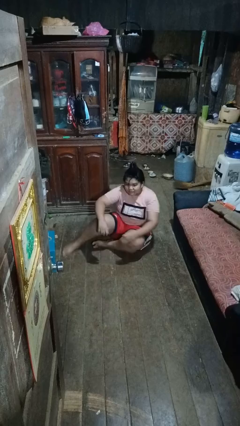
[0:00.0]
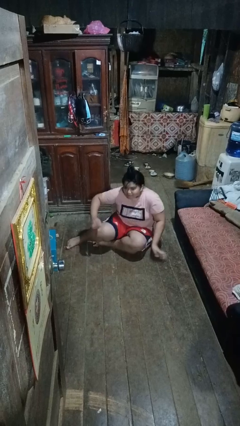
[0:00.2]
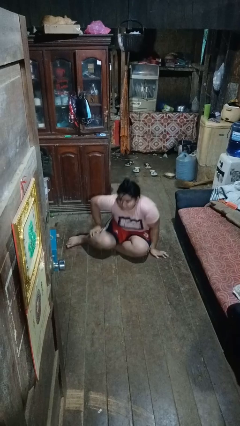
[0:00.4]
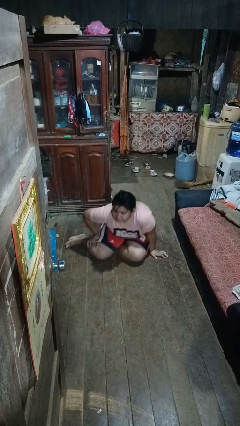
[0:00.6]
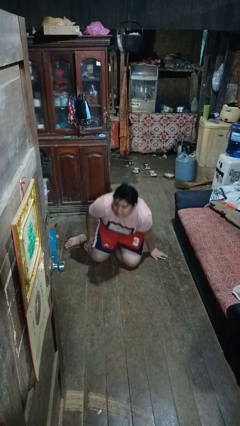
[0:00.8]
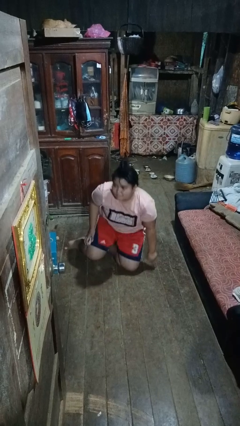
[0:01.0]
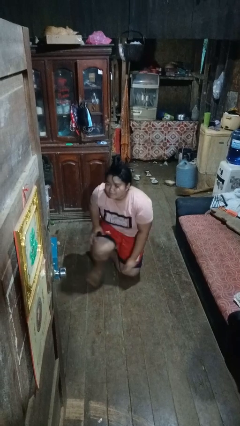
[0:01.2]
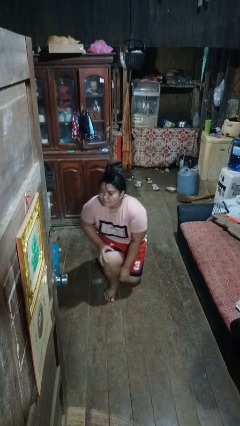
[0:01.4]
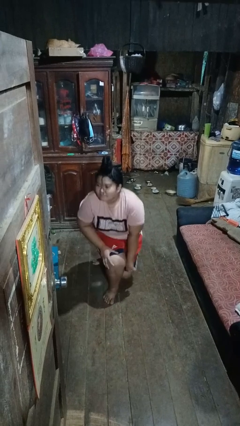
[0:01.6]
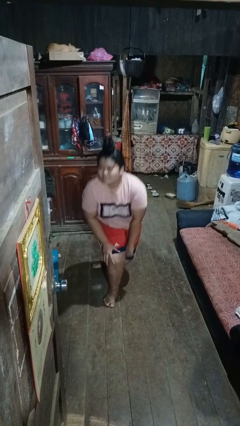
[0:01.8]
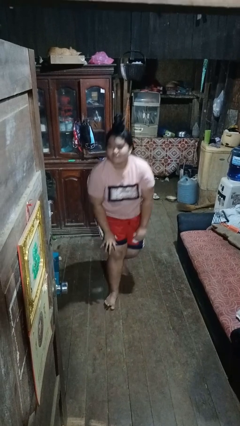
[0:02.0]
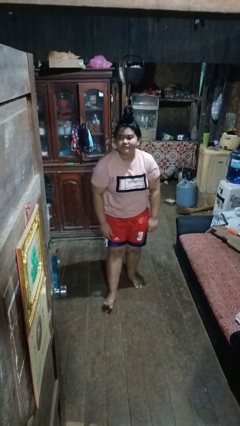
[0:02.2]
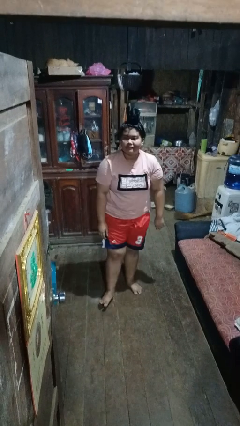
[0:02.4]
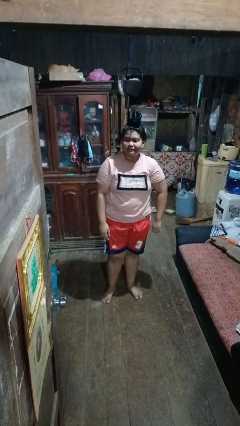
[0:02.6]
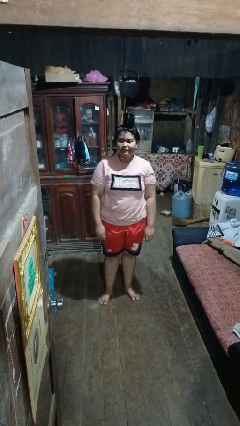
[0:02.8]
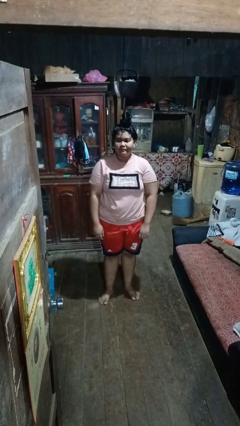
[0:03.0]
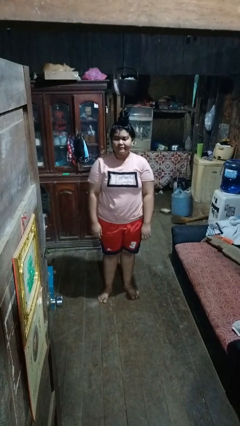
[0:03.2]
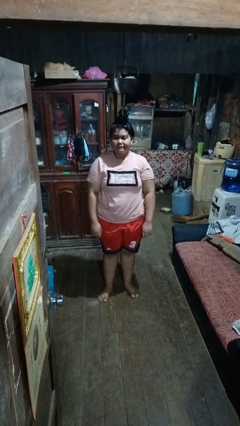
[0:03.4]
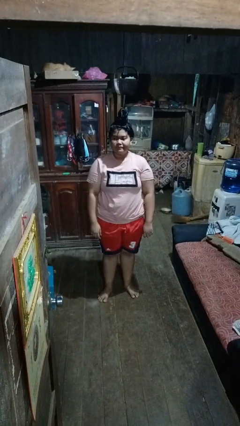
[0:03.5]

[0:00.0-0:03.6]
person stands up from floor

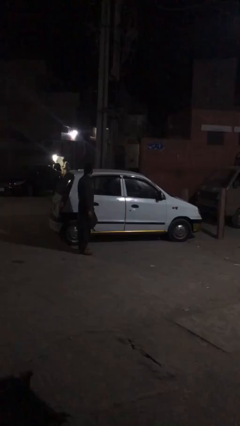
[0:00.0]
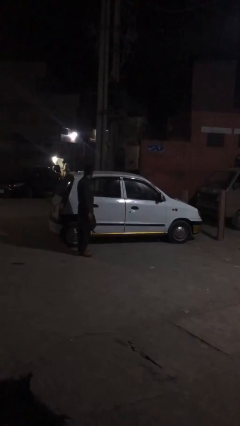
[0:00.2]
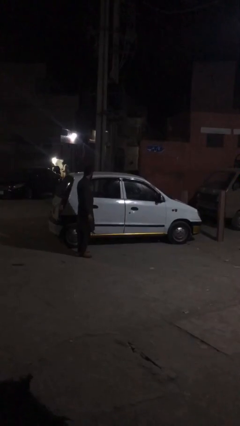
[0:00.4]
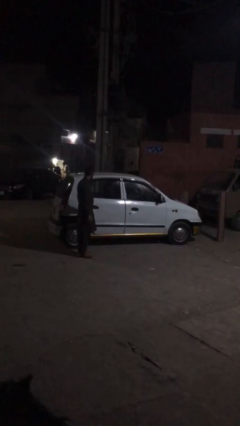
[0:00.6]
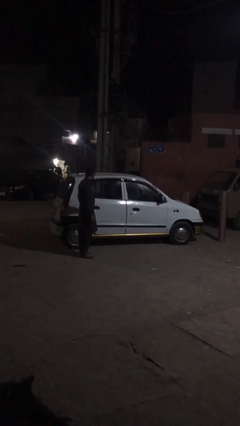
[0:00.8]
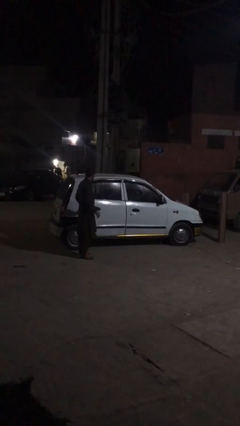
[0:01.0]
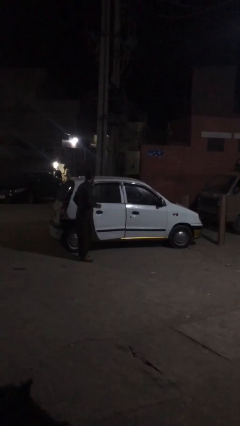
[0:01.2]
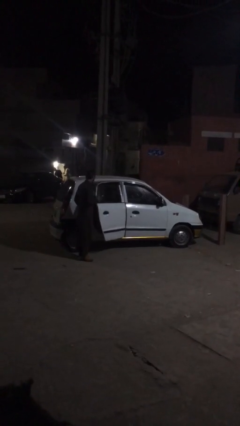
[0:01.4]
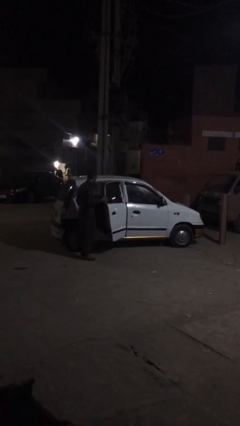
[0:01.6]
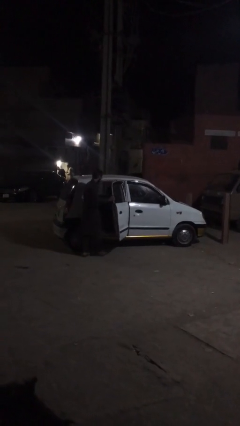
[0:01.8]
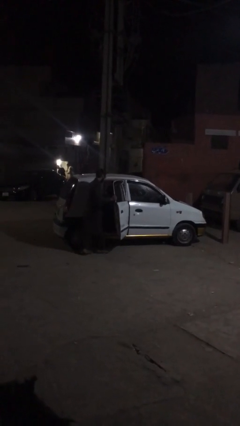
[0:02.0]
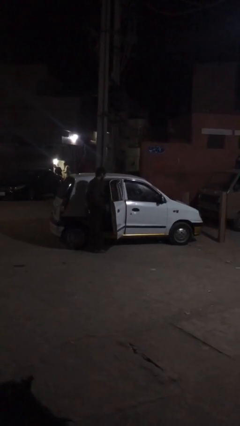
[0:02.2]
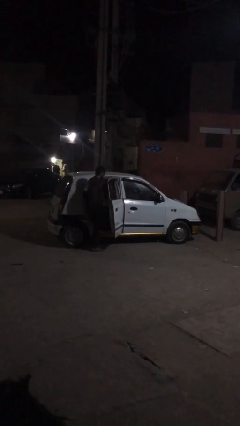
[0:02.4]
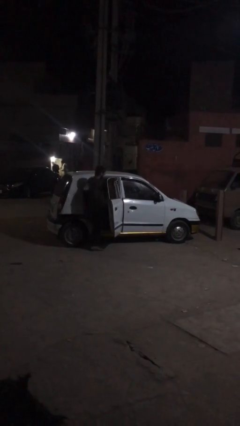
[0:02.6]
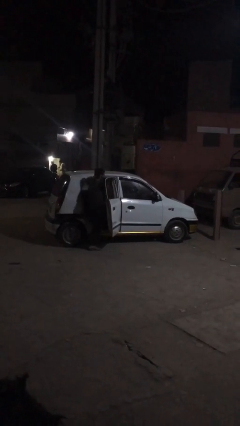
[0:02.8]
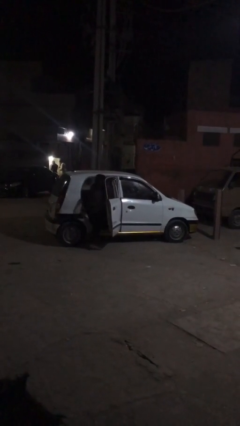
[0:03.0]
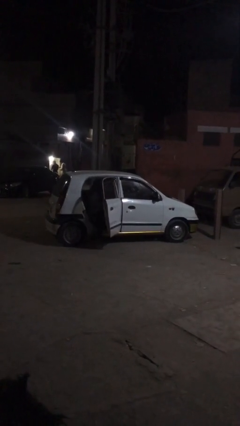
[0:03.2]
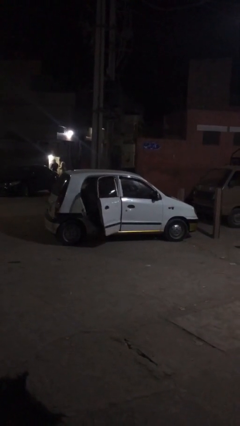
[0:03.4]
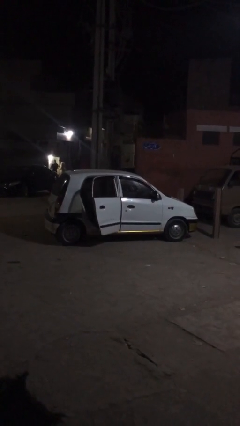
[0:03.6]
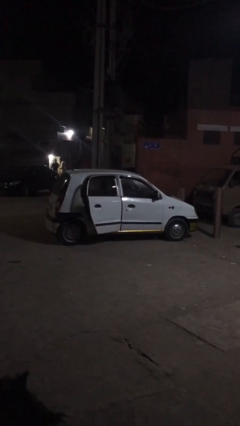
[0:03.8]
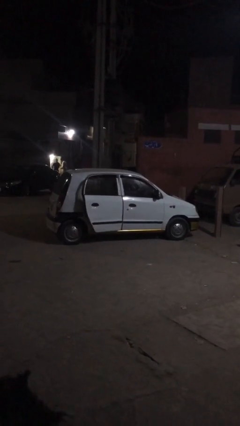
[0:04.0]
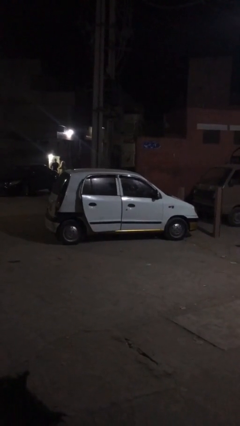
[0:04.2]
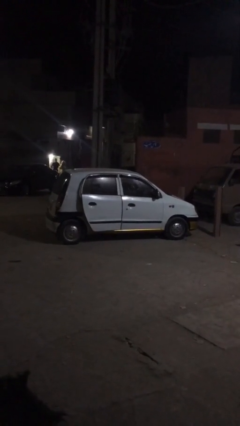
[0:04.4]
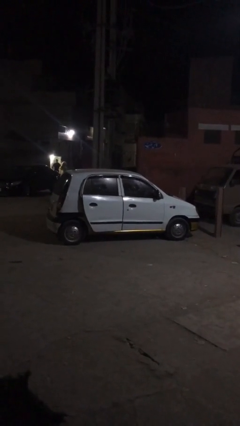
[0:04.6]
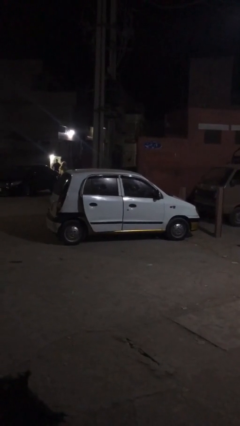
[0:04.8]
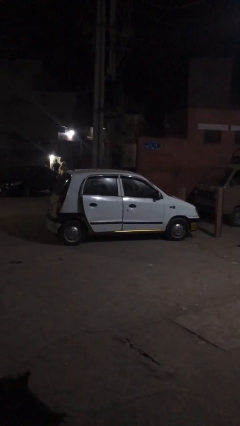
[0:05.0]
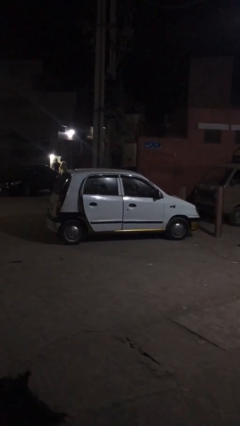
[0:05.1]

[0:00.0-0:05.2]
car picks up person

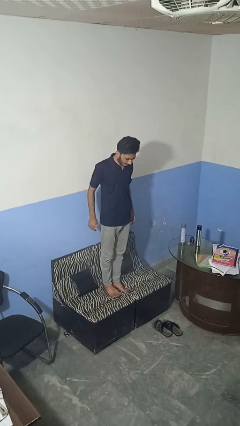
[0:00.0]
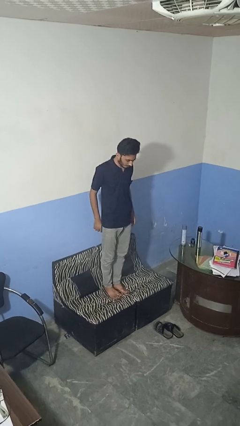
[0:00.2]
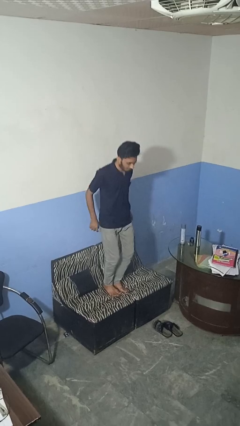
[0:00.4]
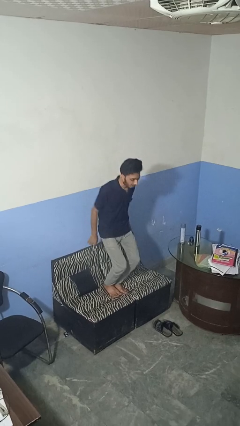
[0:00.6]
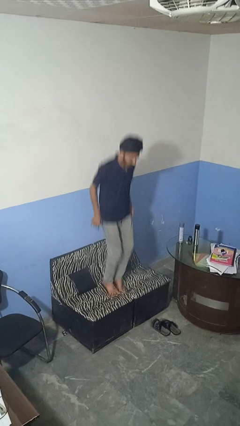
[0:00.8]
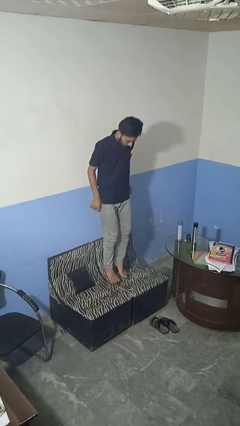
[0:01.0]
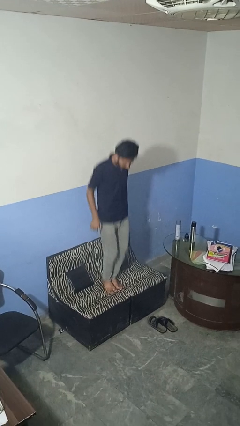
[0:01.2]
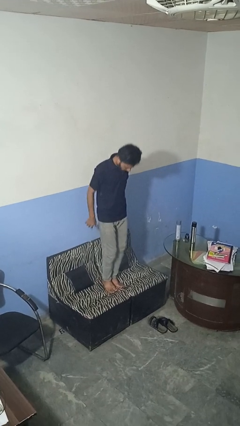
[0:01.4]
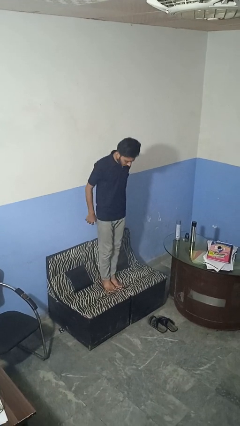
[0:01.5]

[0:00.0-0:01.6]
person jumps on couch

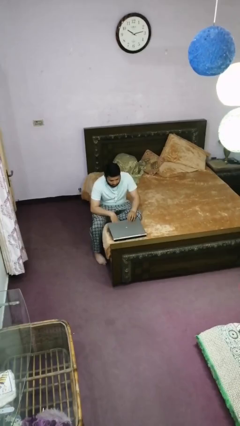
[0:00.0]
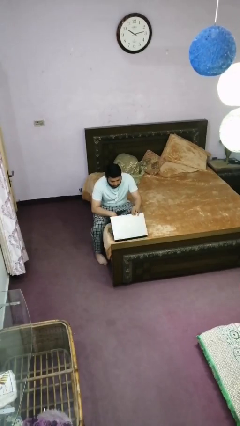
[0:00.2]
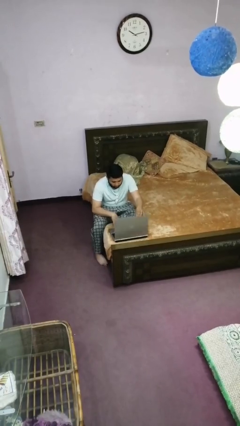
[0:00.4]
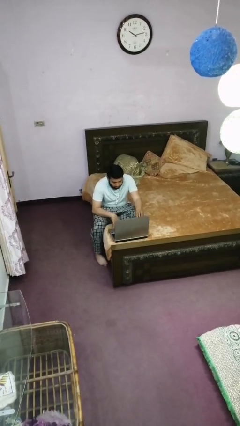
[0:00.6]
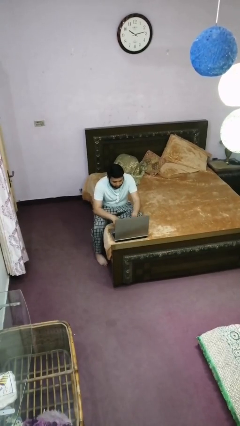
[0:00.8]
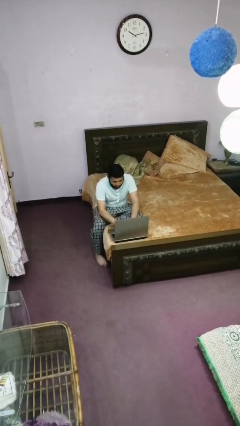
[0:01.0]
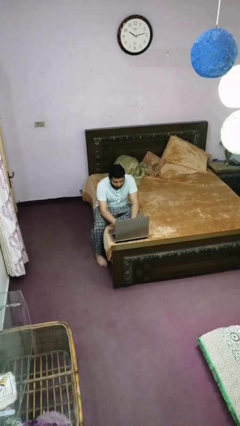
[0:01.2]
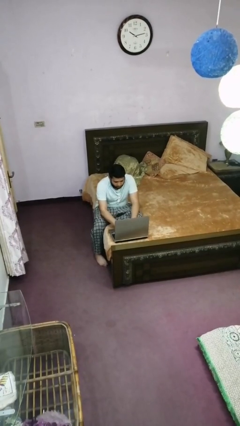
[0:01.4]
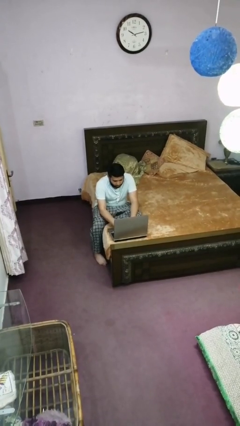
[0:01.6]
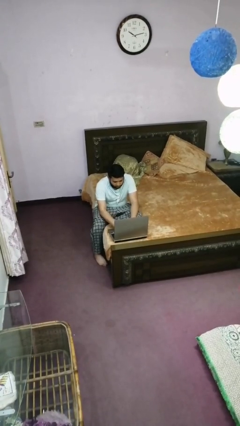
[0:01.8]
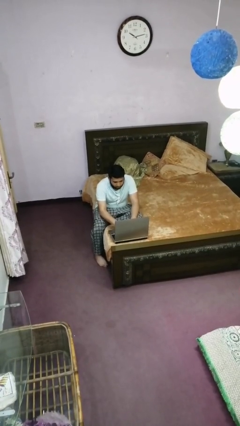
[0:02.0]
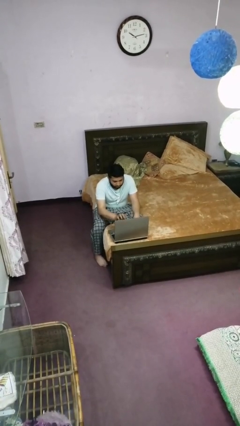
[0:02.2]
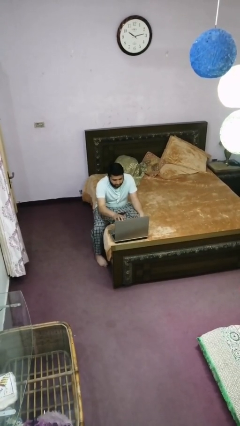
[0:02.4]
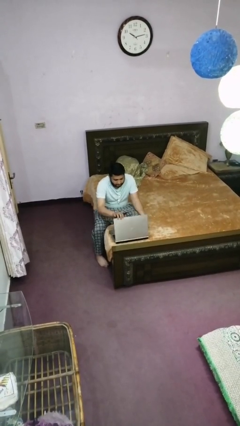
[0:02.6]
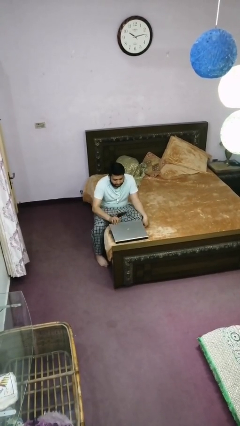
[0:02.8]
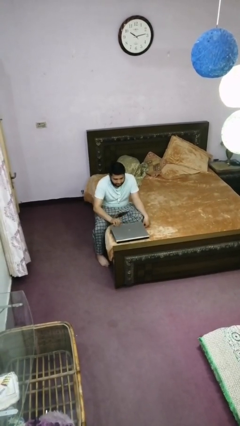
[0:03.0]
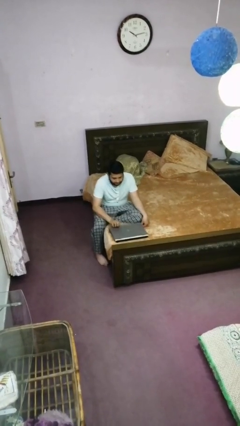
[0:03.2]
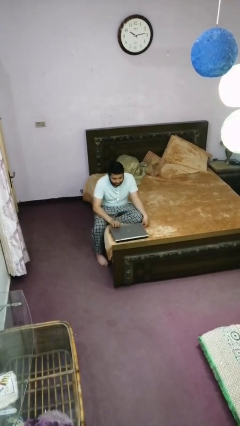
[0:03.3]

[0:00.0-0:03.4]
person interacts with laptop

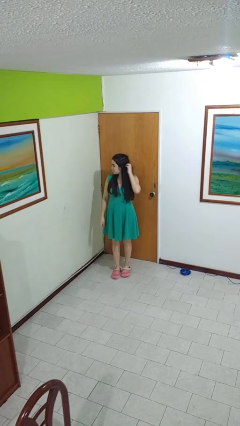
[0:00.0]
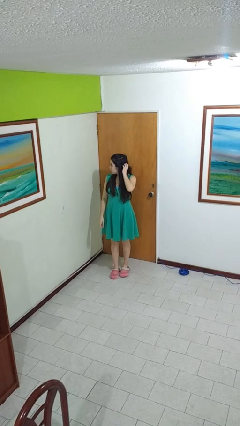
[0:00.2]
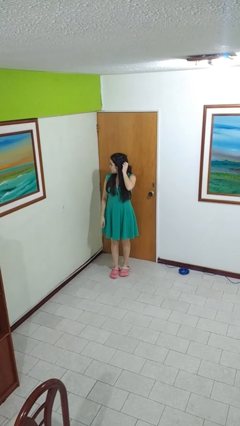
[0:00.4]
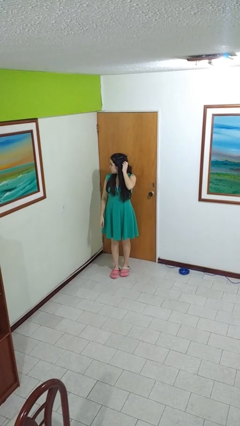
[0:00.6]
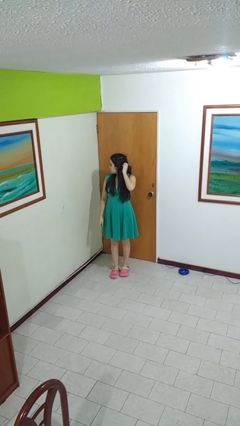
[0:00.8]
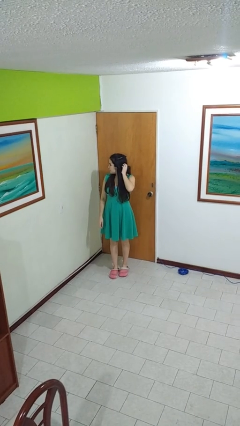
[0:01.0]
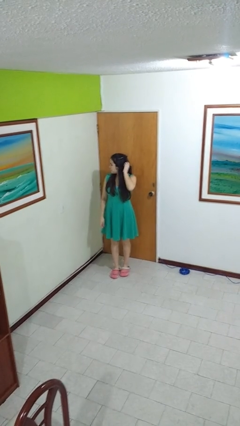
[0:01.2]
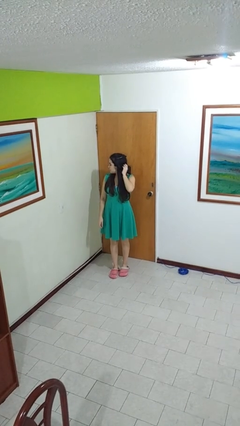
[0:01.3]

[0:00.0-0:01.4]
person scratches face

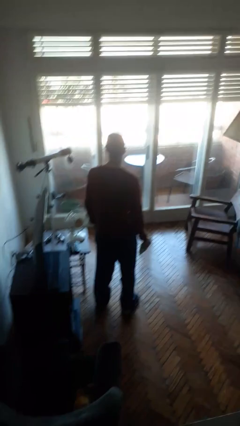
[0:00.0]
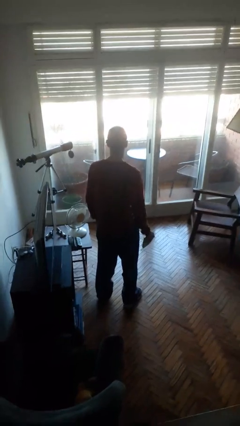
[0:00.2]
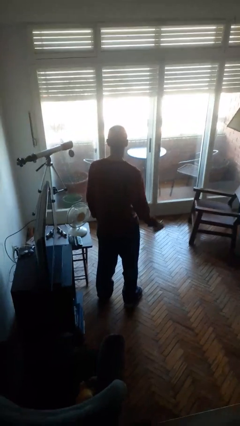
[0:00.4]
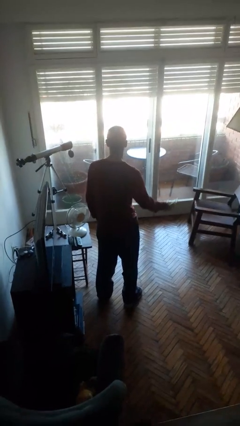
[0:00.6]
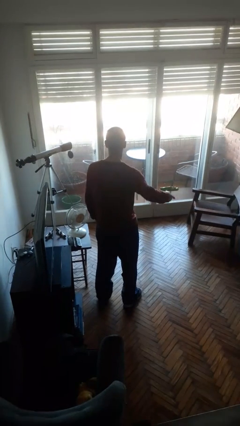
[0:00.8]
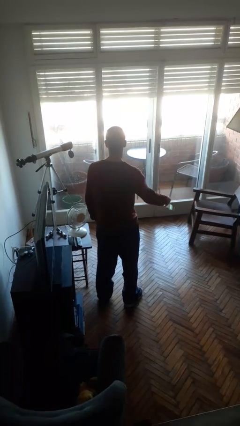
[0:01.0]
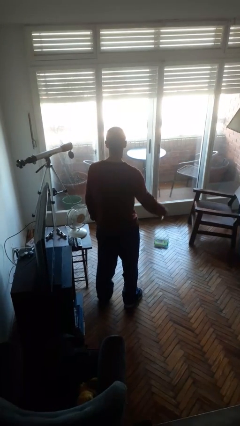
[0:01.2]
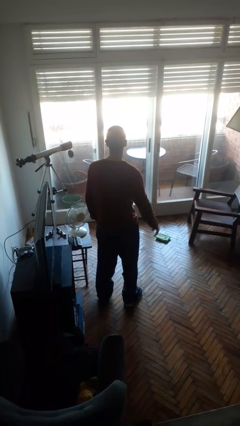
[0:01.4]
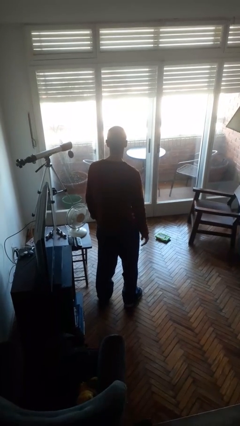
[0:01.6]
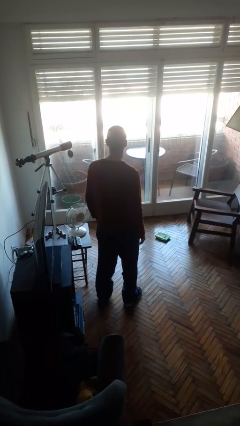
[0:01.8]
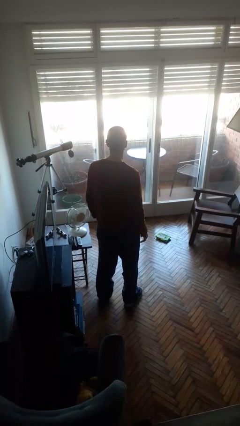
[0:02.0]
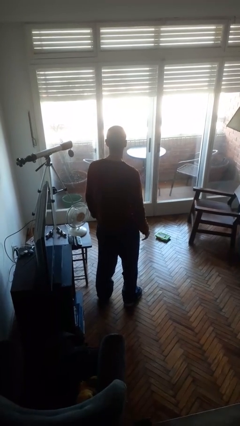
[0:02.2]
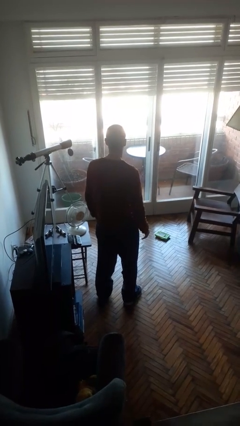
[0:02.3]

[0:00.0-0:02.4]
person throws object to ground
